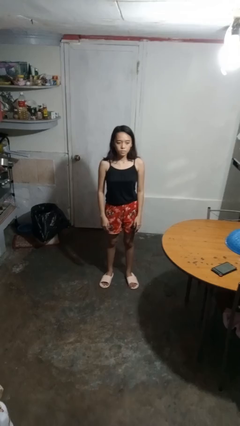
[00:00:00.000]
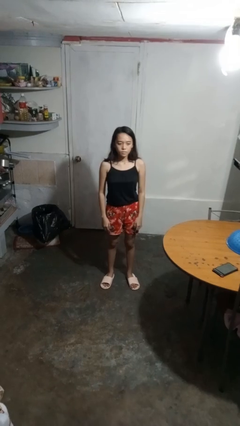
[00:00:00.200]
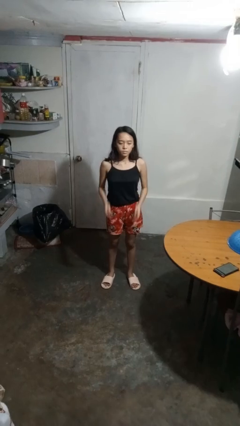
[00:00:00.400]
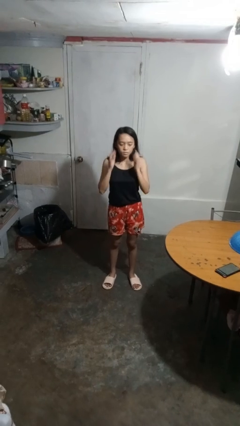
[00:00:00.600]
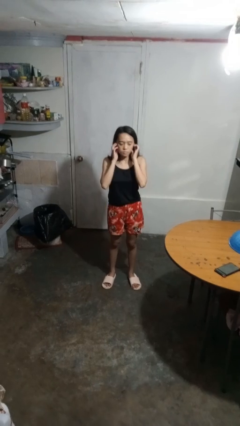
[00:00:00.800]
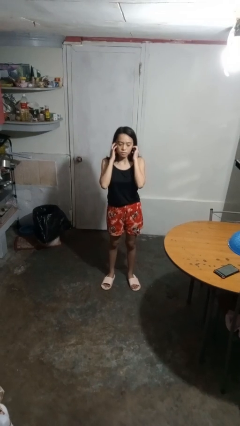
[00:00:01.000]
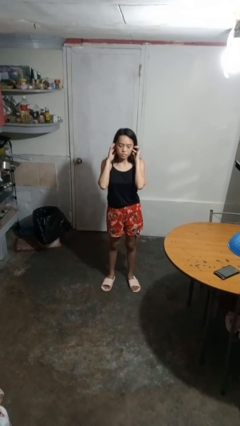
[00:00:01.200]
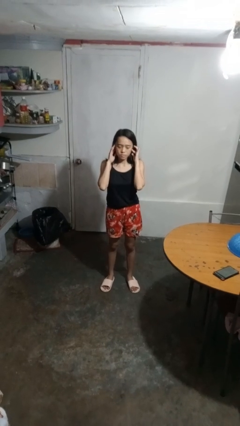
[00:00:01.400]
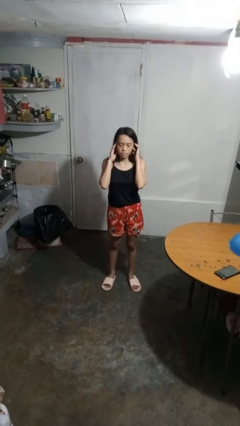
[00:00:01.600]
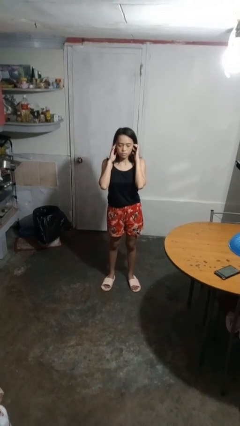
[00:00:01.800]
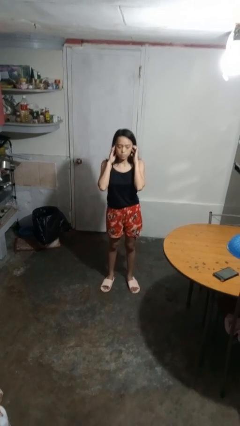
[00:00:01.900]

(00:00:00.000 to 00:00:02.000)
person puts fingers in ear

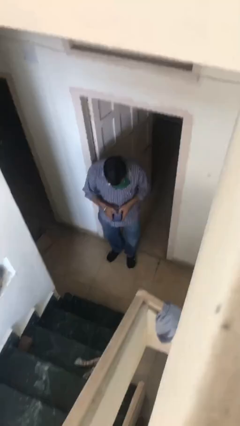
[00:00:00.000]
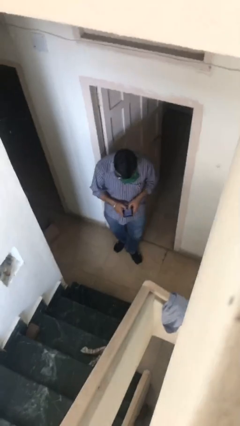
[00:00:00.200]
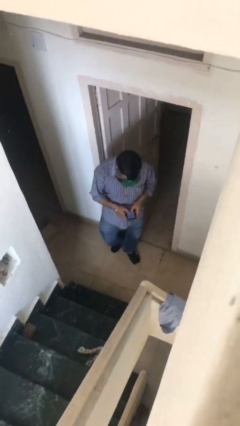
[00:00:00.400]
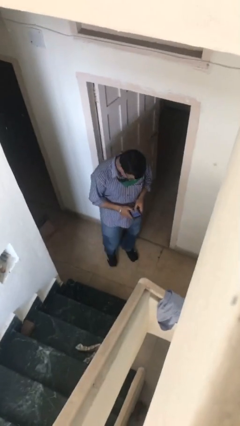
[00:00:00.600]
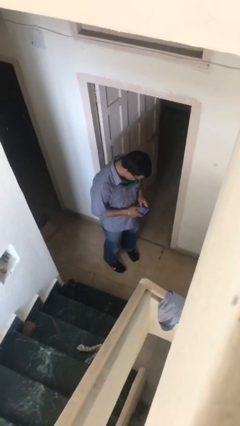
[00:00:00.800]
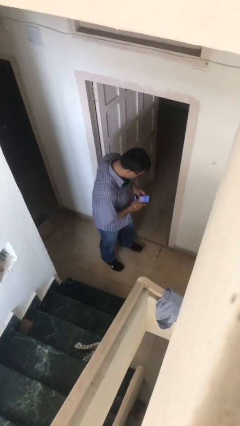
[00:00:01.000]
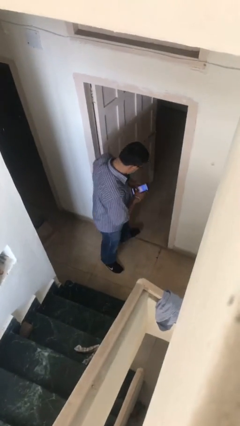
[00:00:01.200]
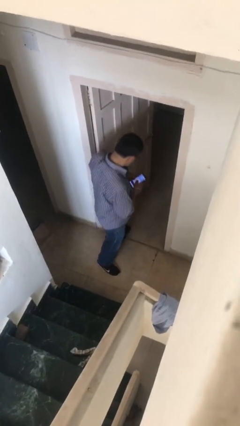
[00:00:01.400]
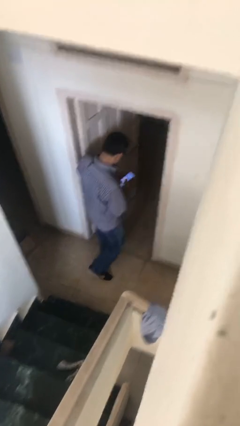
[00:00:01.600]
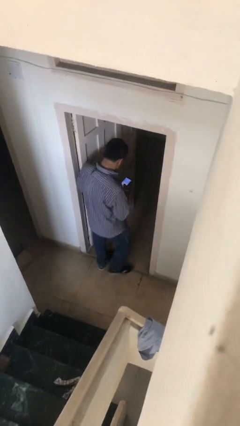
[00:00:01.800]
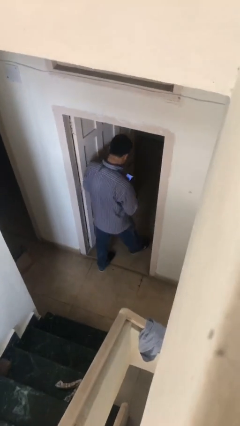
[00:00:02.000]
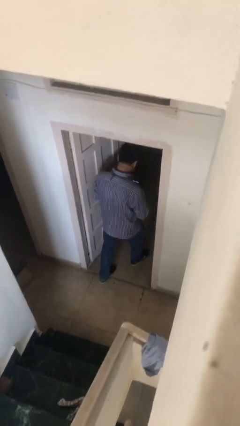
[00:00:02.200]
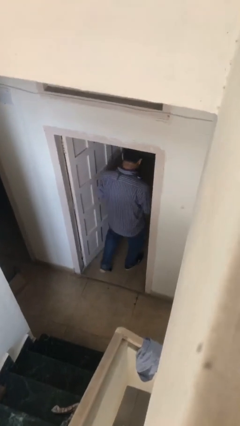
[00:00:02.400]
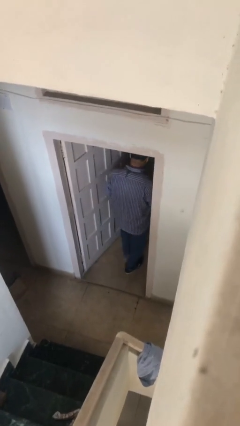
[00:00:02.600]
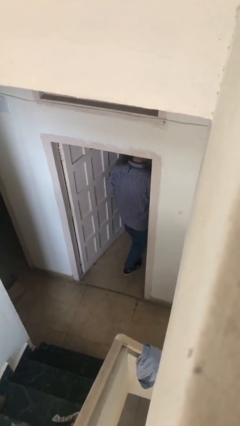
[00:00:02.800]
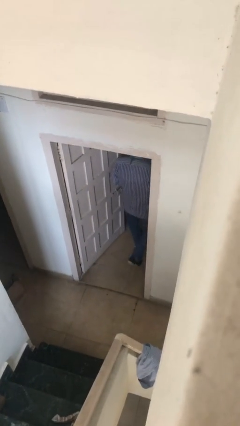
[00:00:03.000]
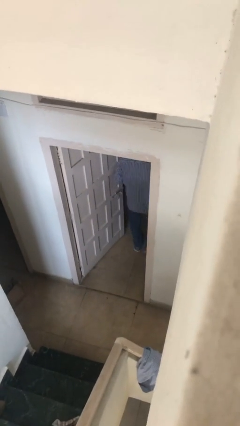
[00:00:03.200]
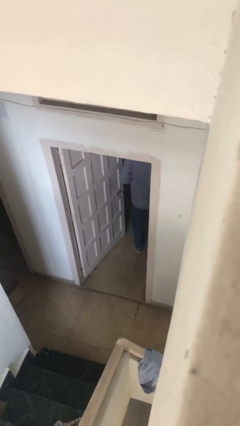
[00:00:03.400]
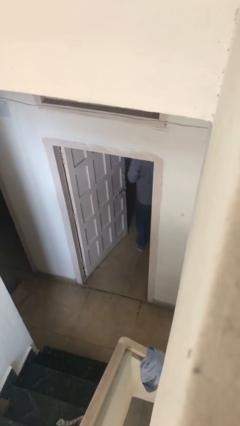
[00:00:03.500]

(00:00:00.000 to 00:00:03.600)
person exits scene through structure

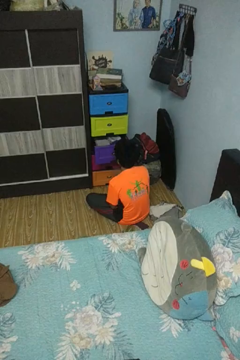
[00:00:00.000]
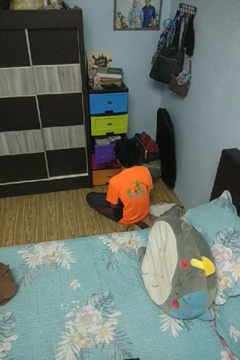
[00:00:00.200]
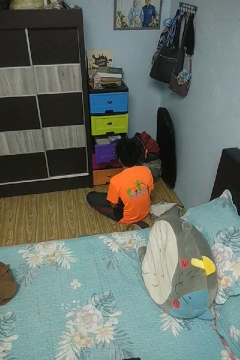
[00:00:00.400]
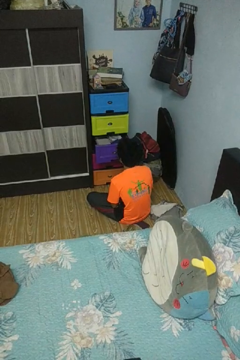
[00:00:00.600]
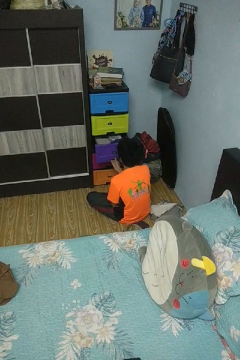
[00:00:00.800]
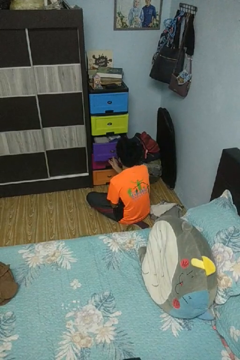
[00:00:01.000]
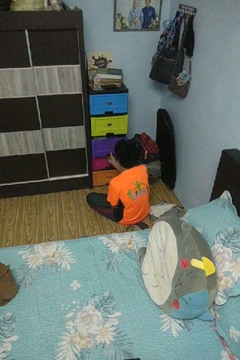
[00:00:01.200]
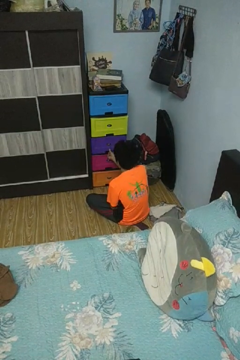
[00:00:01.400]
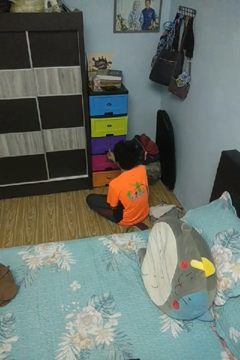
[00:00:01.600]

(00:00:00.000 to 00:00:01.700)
person closes dresser drawer

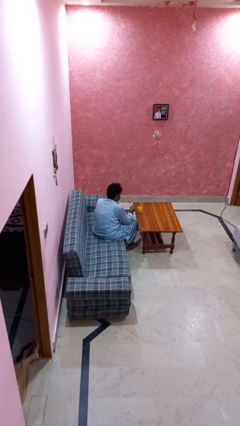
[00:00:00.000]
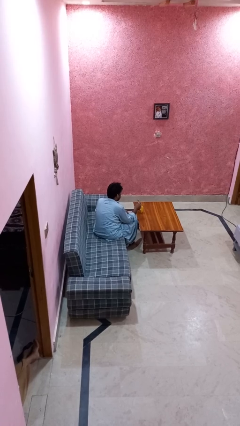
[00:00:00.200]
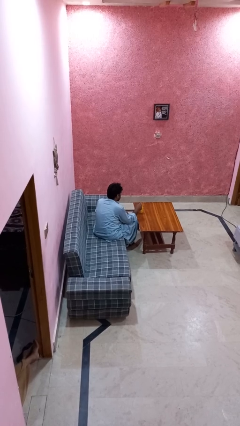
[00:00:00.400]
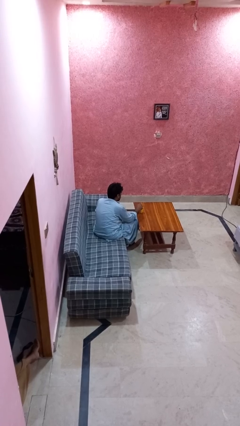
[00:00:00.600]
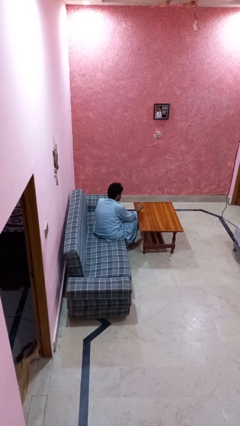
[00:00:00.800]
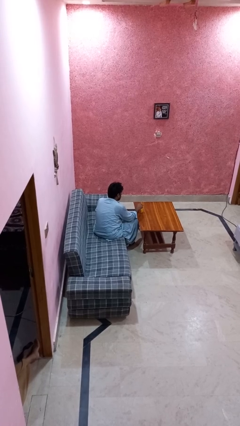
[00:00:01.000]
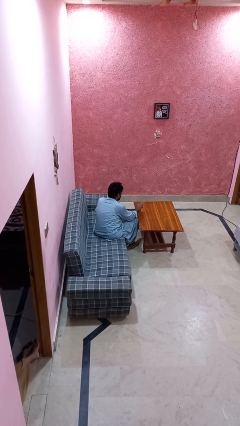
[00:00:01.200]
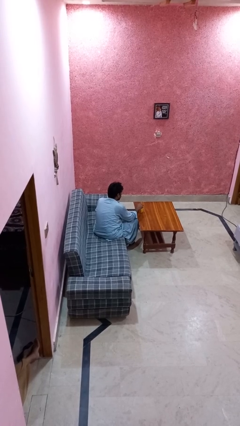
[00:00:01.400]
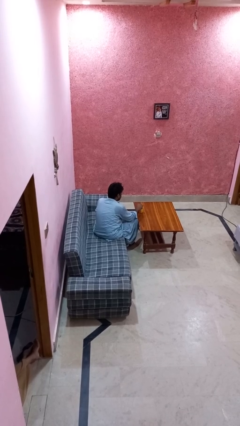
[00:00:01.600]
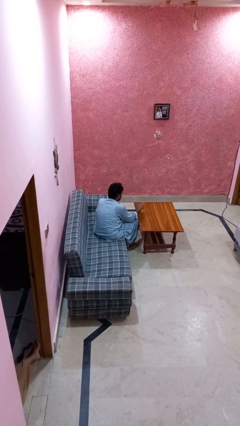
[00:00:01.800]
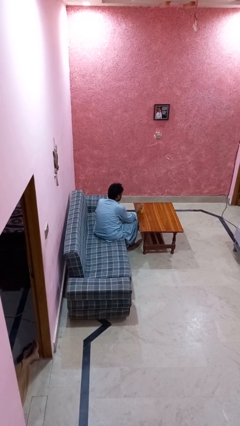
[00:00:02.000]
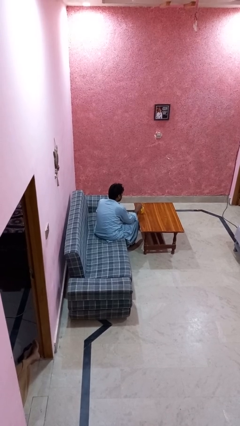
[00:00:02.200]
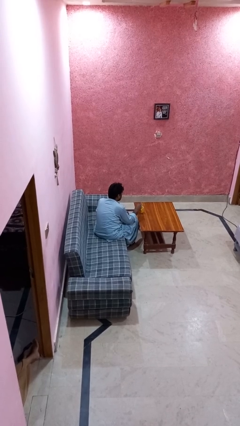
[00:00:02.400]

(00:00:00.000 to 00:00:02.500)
person stirs mug

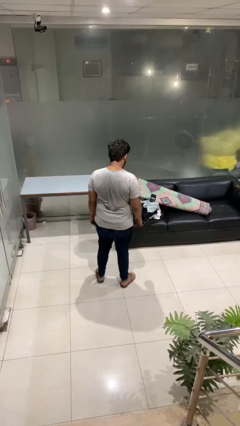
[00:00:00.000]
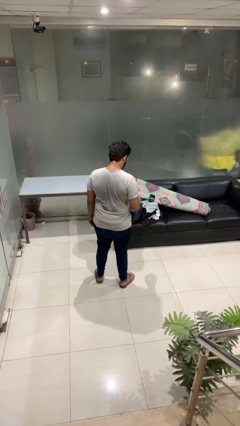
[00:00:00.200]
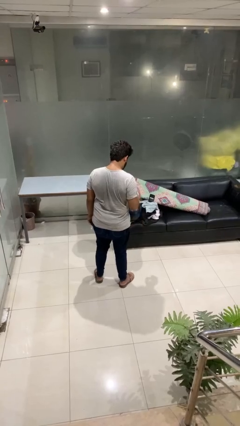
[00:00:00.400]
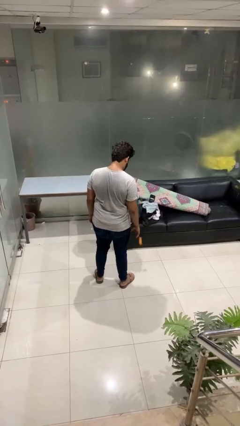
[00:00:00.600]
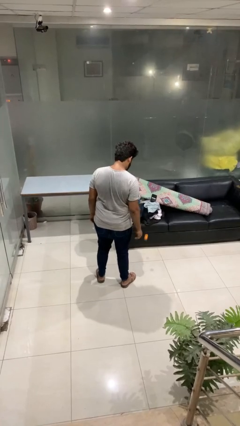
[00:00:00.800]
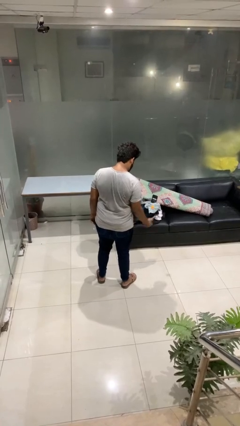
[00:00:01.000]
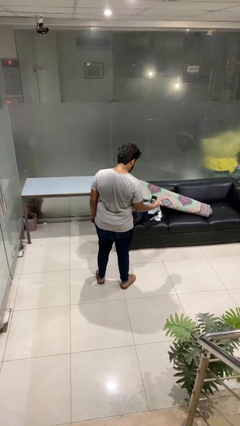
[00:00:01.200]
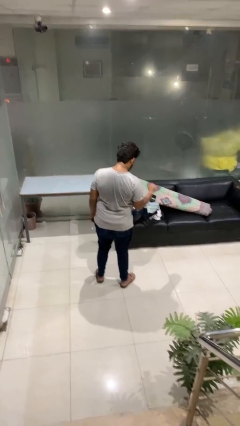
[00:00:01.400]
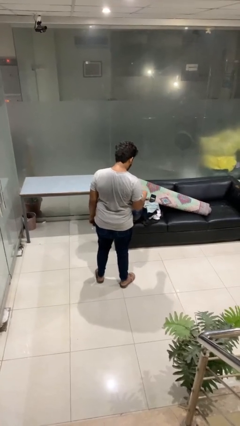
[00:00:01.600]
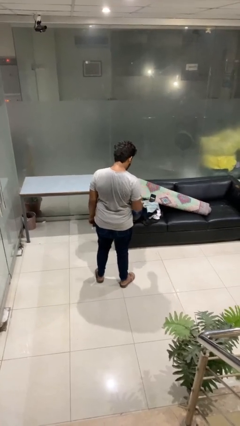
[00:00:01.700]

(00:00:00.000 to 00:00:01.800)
person bounces ball on floor

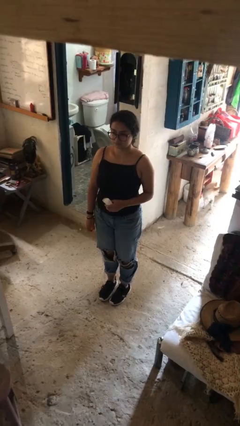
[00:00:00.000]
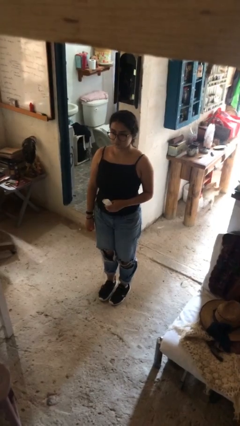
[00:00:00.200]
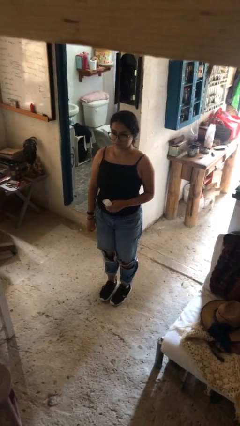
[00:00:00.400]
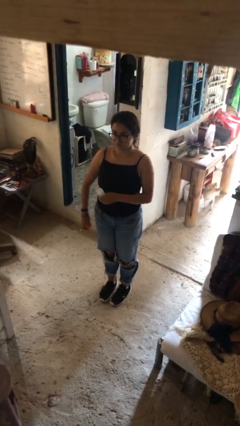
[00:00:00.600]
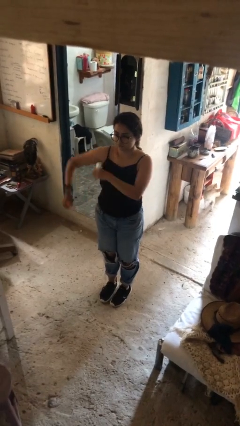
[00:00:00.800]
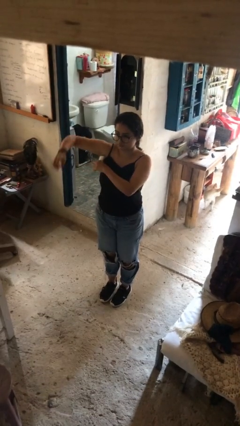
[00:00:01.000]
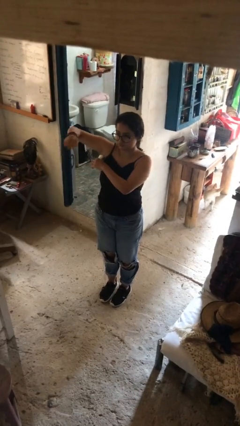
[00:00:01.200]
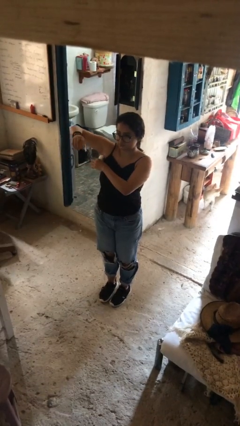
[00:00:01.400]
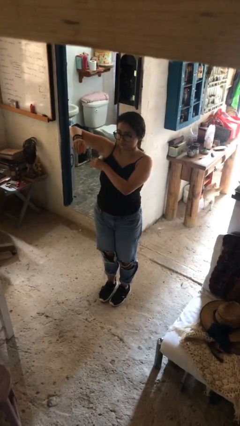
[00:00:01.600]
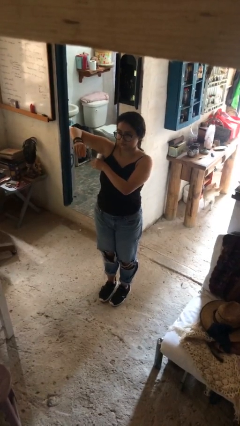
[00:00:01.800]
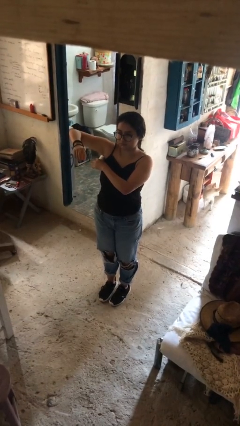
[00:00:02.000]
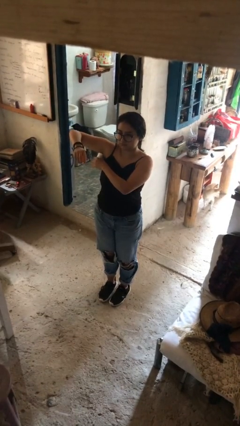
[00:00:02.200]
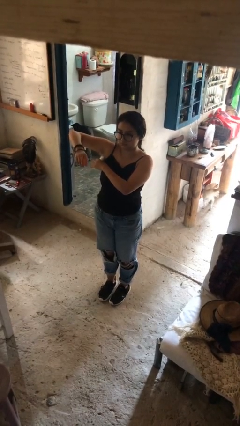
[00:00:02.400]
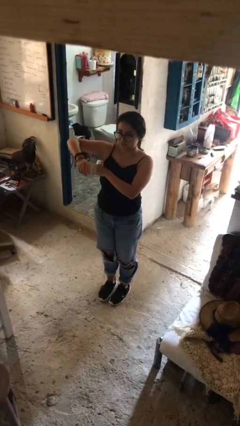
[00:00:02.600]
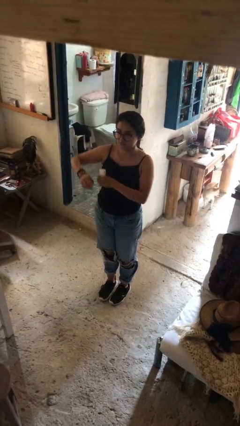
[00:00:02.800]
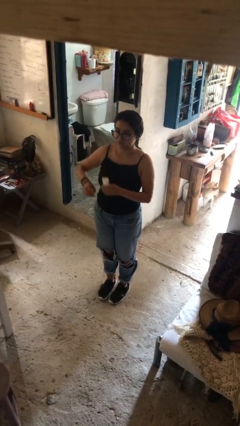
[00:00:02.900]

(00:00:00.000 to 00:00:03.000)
person applies deodorant

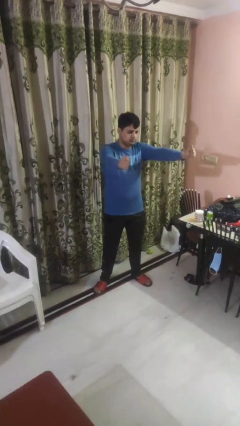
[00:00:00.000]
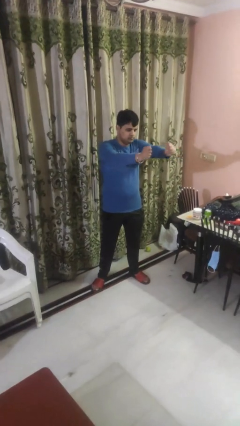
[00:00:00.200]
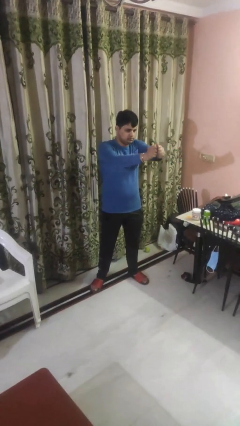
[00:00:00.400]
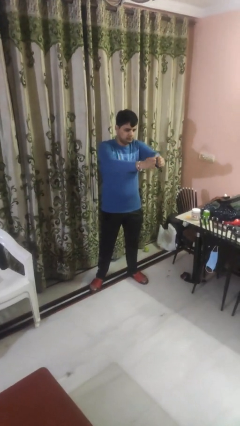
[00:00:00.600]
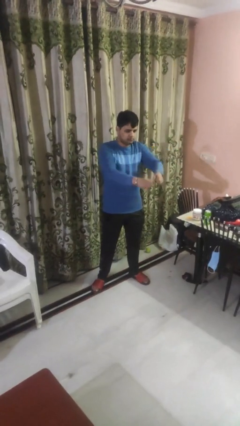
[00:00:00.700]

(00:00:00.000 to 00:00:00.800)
person gestures zoom out

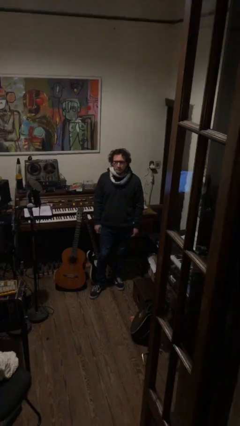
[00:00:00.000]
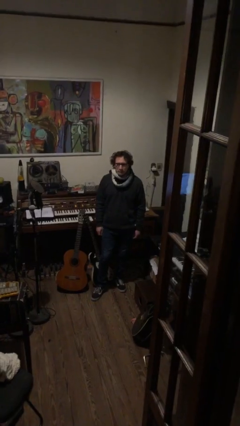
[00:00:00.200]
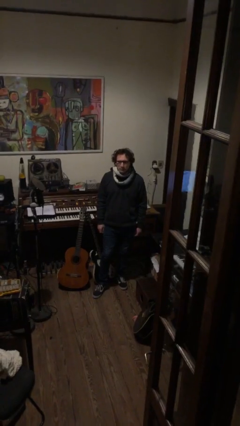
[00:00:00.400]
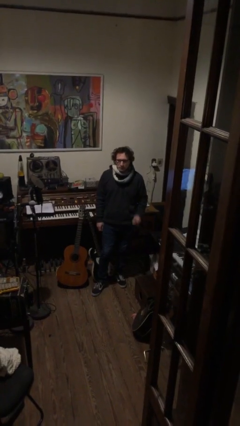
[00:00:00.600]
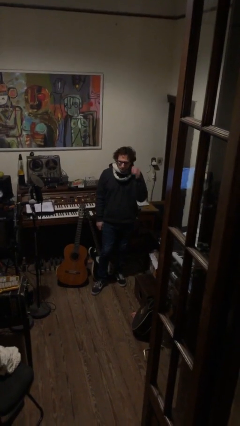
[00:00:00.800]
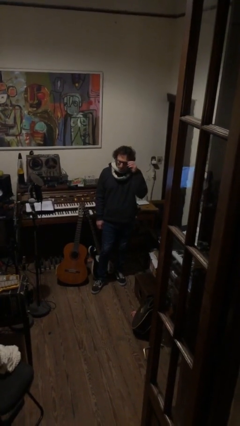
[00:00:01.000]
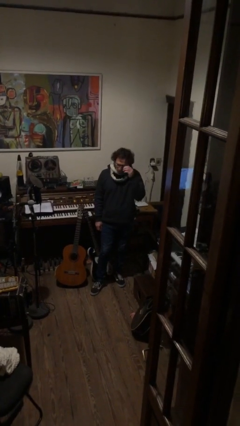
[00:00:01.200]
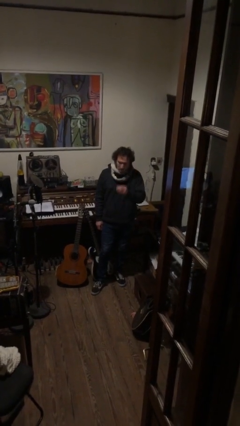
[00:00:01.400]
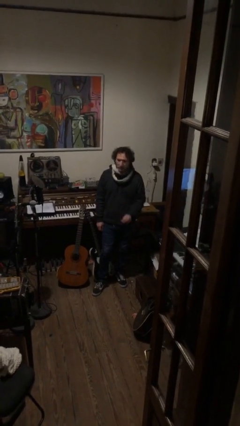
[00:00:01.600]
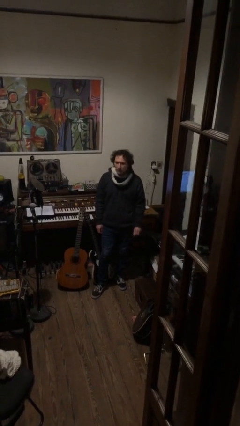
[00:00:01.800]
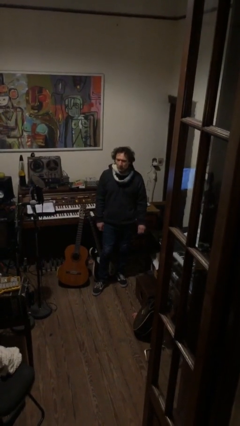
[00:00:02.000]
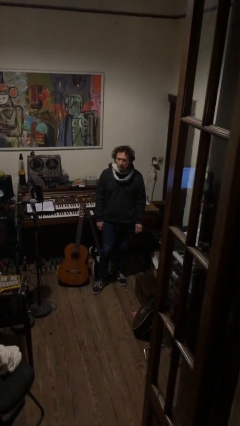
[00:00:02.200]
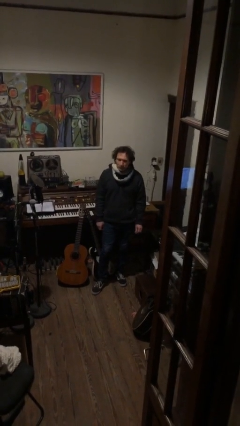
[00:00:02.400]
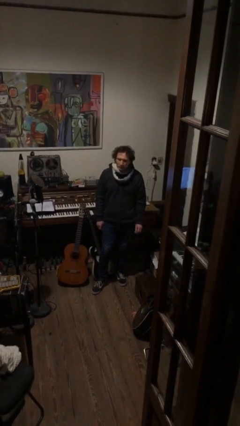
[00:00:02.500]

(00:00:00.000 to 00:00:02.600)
person takes off glasses
